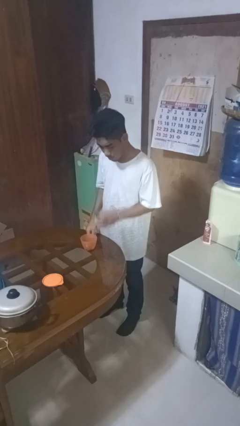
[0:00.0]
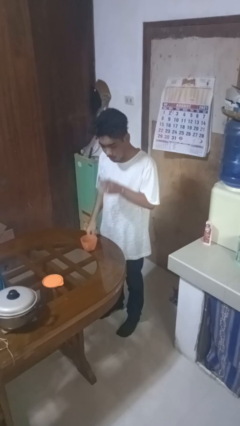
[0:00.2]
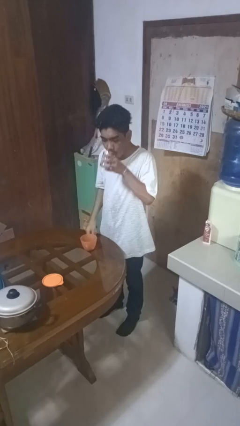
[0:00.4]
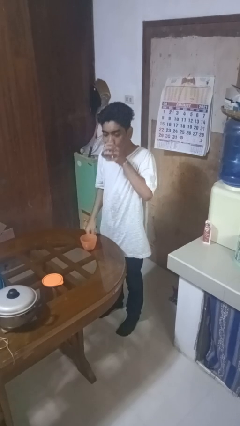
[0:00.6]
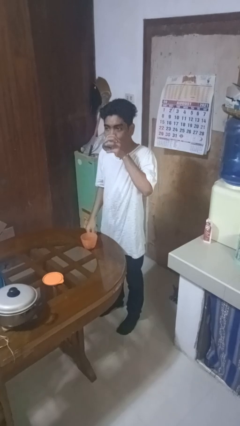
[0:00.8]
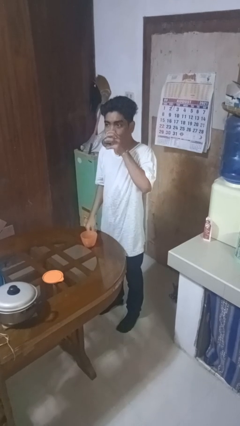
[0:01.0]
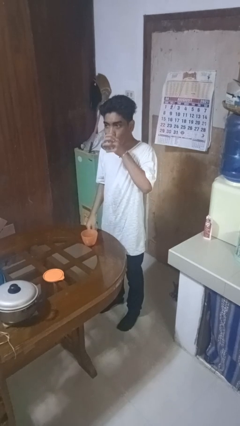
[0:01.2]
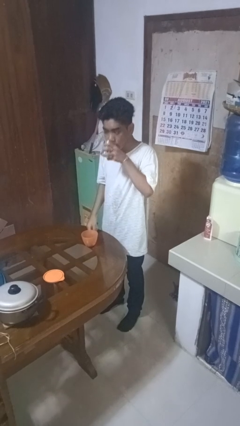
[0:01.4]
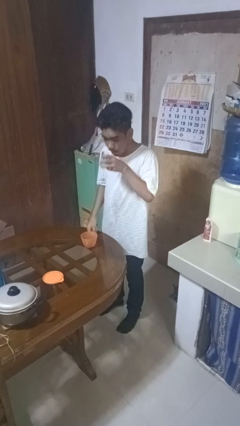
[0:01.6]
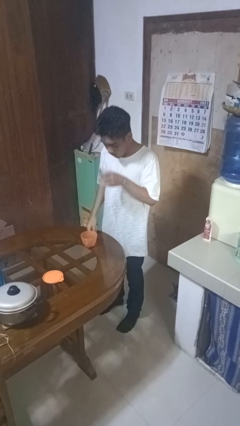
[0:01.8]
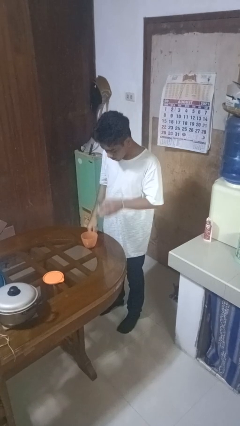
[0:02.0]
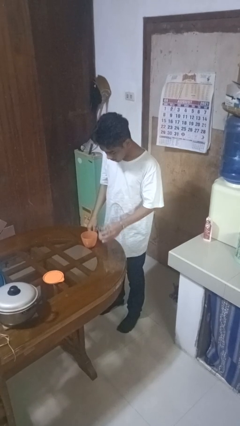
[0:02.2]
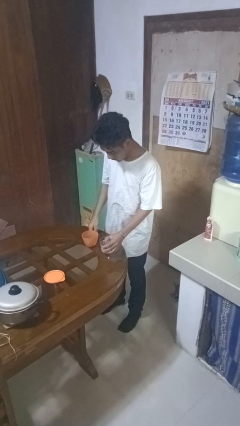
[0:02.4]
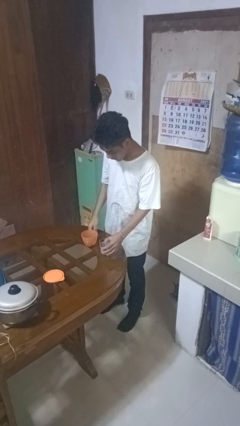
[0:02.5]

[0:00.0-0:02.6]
person drinks from cup

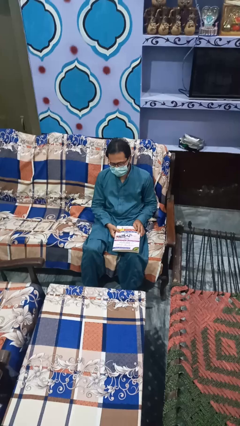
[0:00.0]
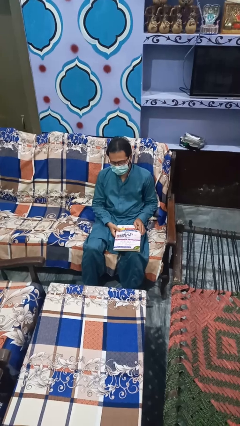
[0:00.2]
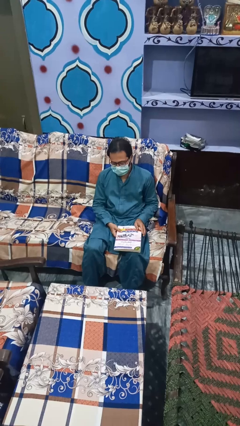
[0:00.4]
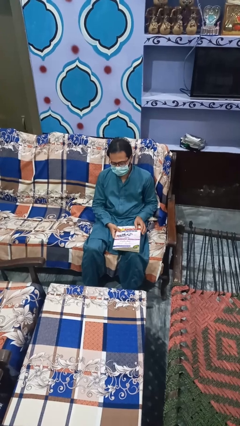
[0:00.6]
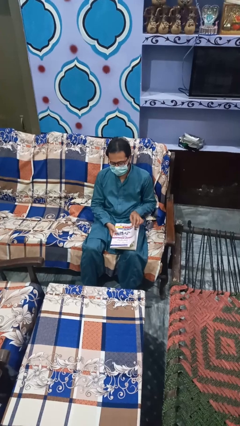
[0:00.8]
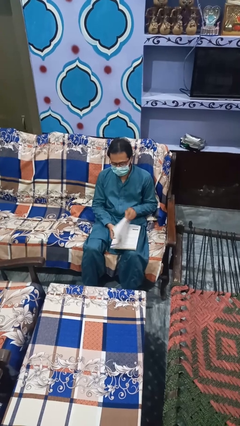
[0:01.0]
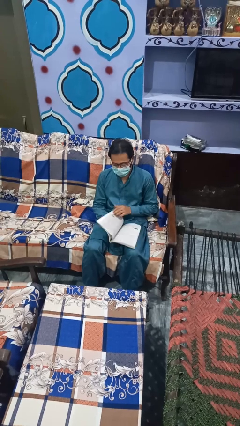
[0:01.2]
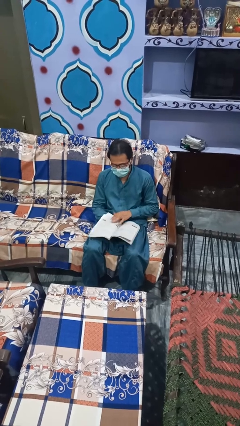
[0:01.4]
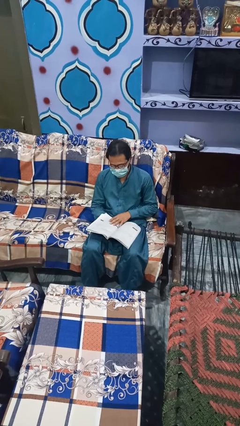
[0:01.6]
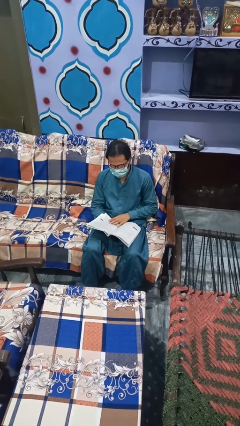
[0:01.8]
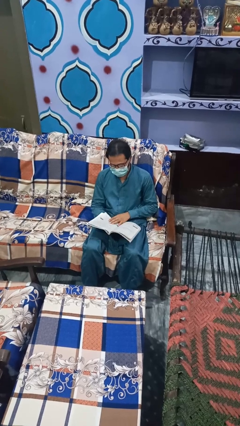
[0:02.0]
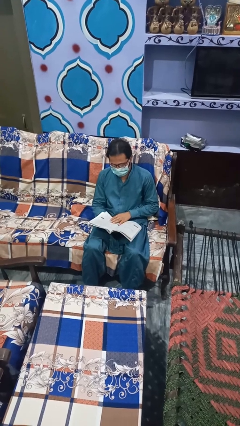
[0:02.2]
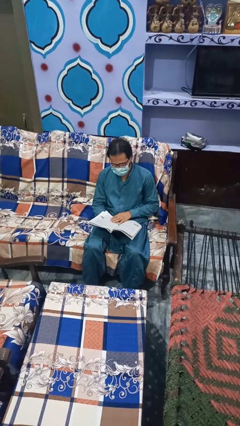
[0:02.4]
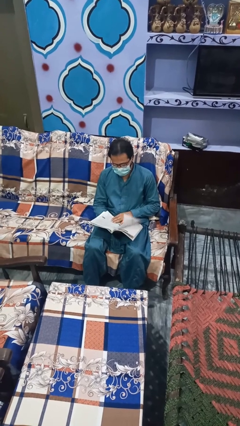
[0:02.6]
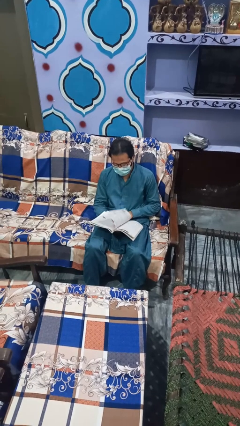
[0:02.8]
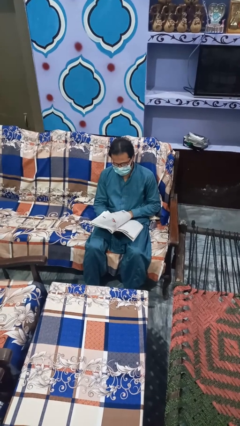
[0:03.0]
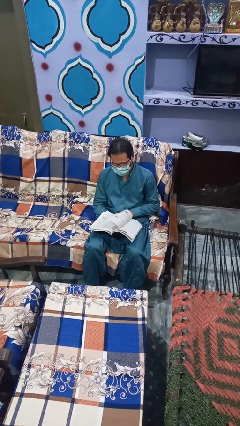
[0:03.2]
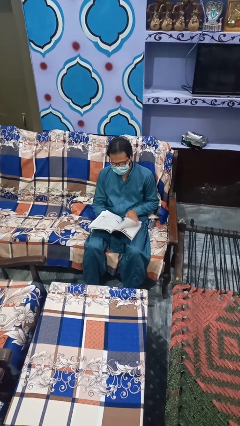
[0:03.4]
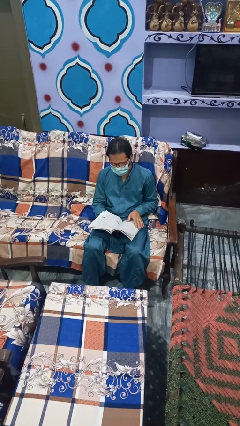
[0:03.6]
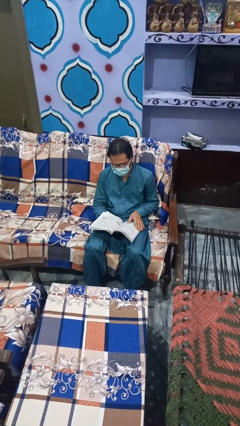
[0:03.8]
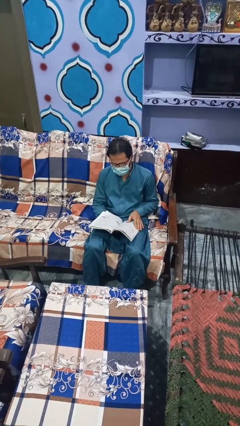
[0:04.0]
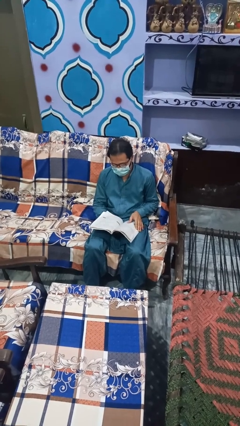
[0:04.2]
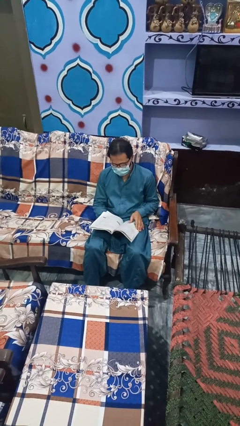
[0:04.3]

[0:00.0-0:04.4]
person reads magazine

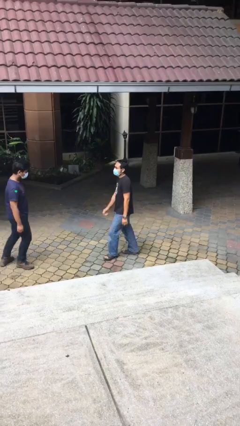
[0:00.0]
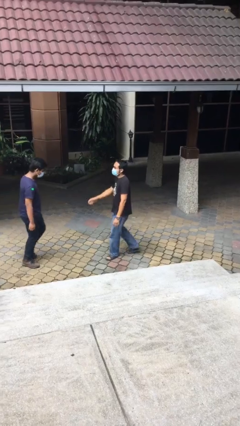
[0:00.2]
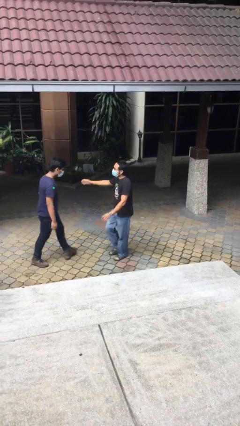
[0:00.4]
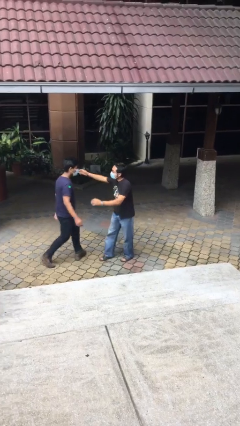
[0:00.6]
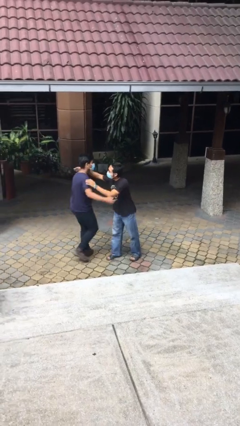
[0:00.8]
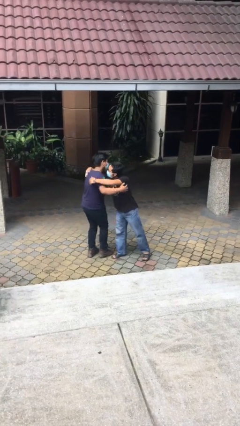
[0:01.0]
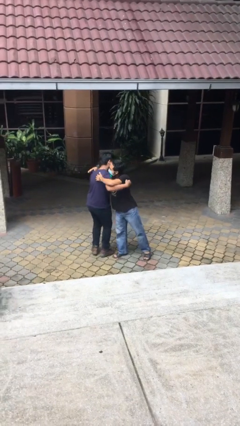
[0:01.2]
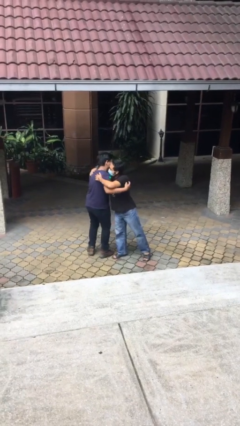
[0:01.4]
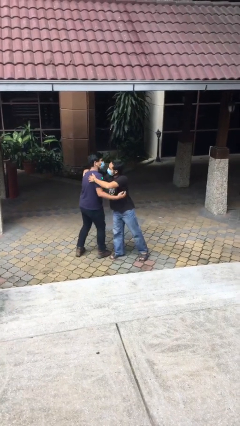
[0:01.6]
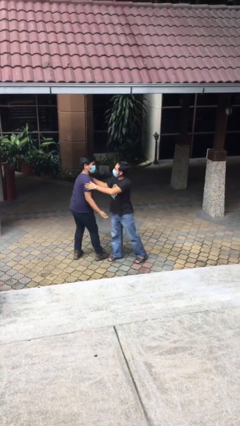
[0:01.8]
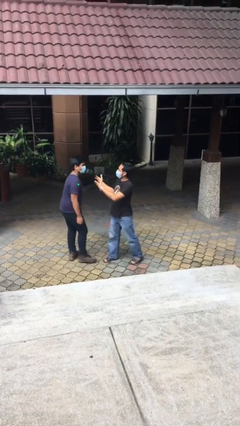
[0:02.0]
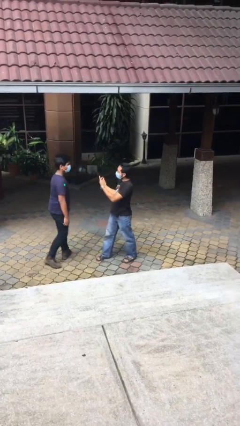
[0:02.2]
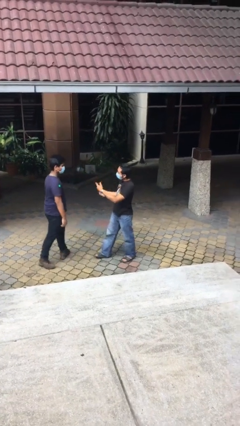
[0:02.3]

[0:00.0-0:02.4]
person embraces person

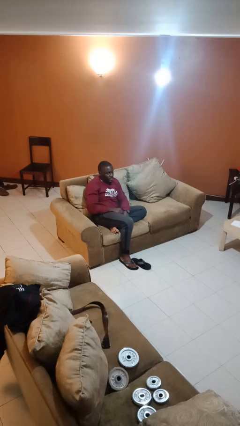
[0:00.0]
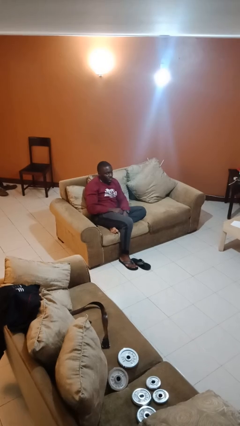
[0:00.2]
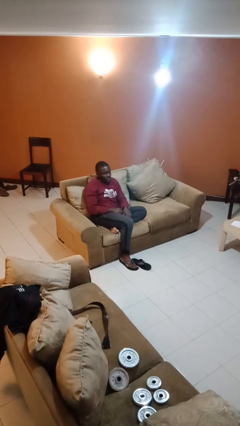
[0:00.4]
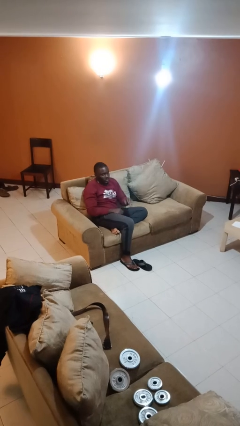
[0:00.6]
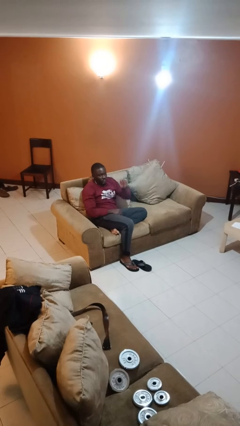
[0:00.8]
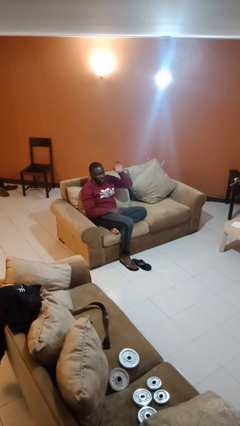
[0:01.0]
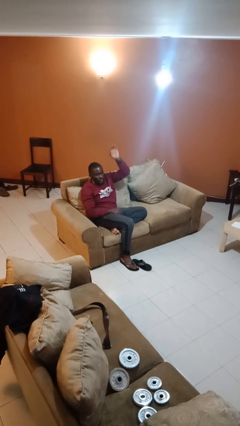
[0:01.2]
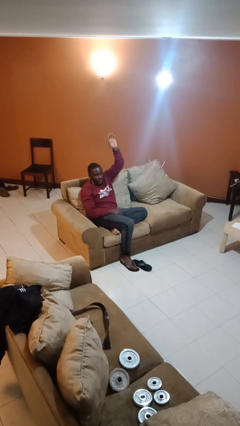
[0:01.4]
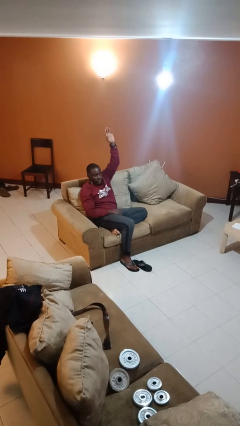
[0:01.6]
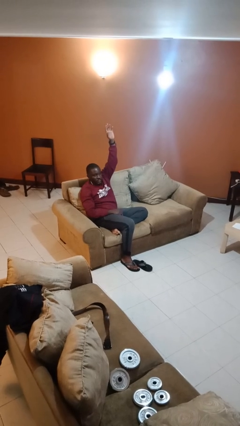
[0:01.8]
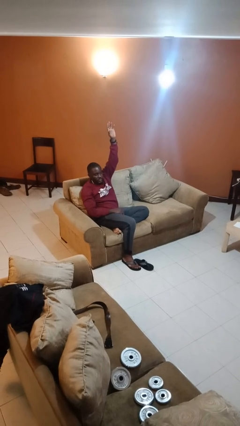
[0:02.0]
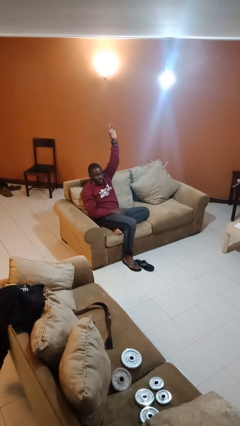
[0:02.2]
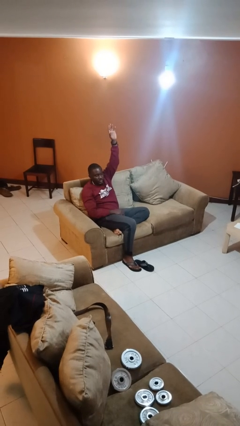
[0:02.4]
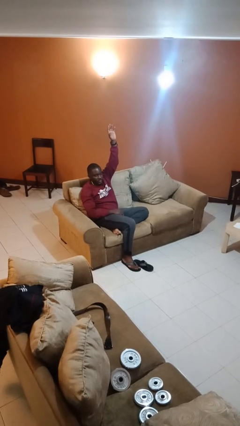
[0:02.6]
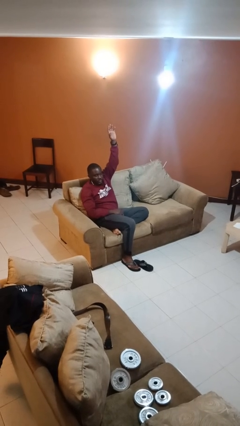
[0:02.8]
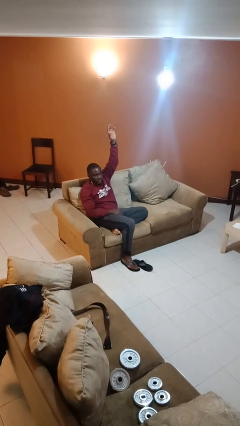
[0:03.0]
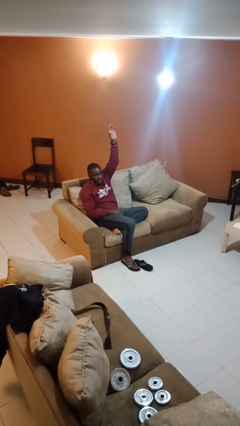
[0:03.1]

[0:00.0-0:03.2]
person gestures raise hand

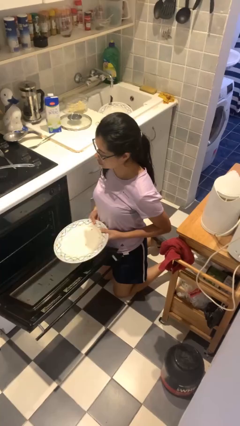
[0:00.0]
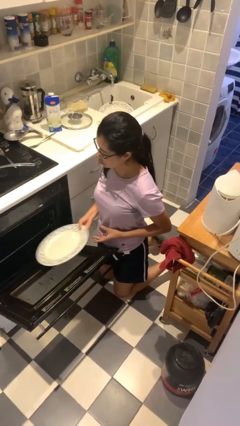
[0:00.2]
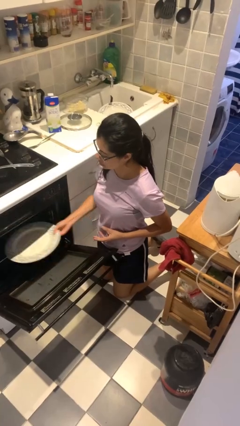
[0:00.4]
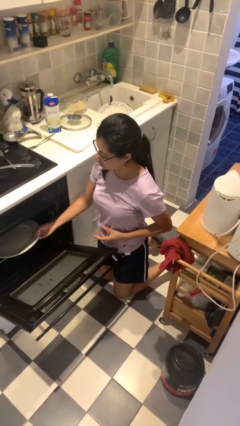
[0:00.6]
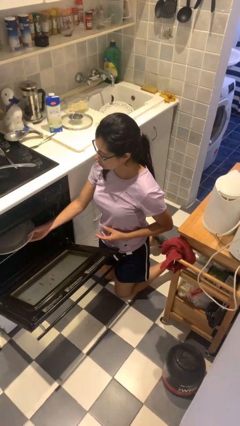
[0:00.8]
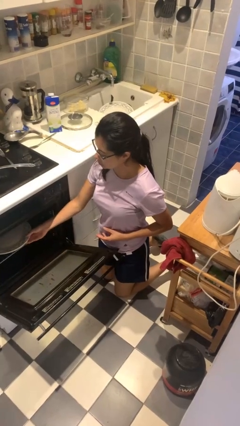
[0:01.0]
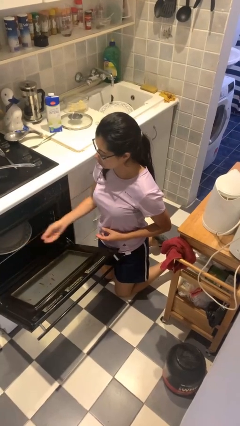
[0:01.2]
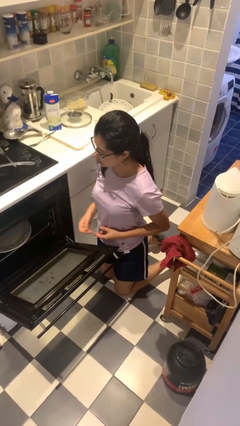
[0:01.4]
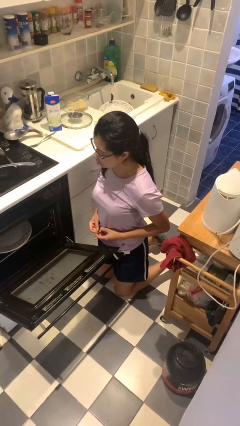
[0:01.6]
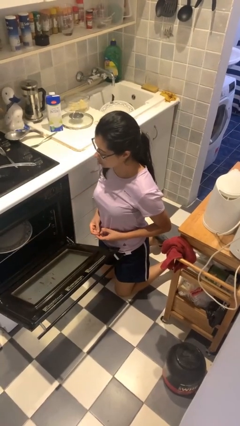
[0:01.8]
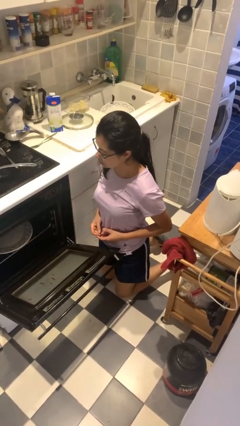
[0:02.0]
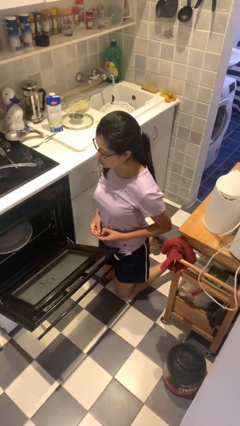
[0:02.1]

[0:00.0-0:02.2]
person loads dishwasher

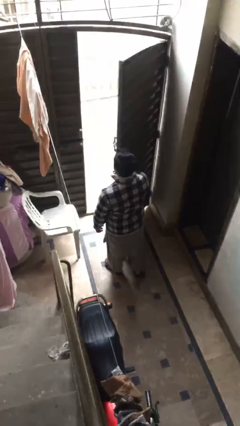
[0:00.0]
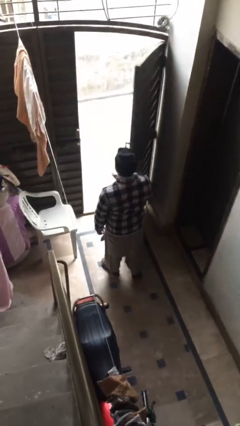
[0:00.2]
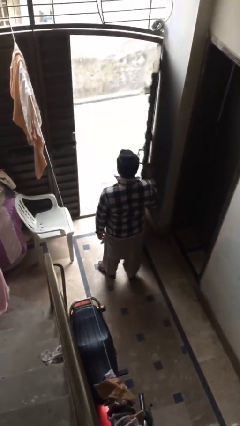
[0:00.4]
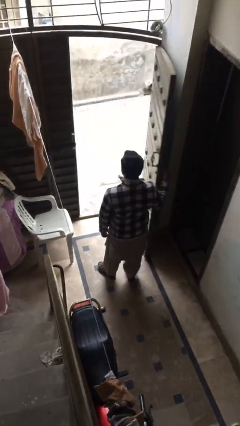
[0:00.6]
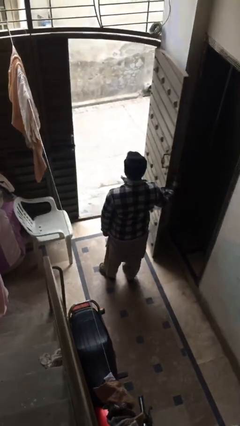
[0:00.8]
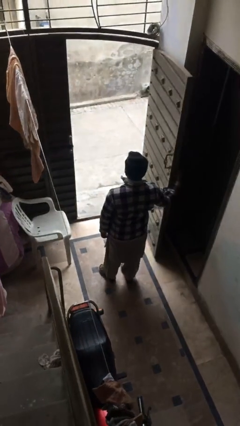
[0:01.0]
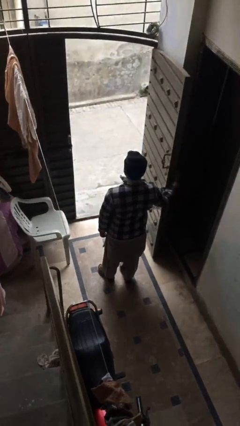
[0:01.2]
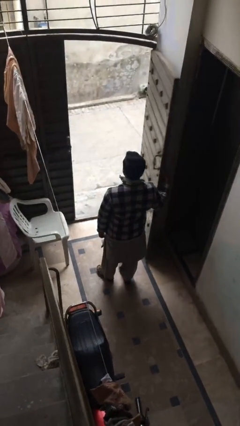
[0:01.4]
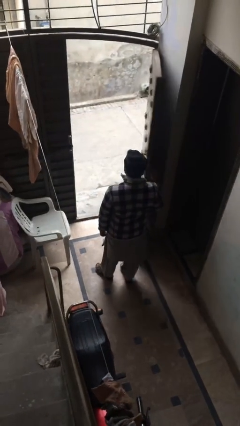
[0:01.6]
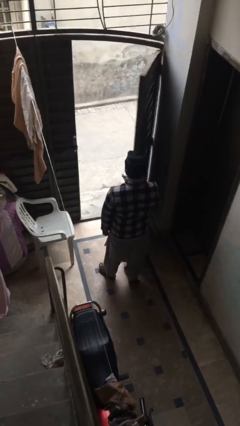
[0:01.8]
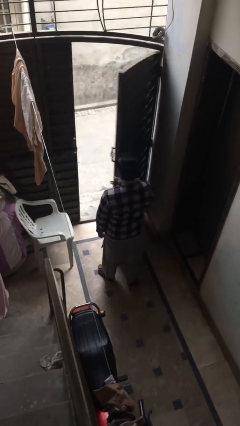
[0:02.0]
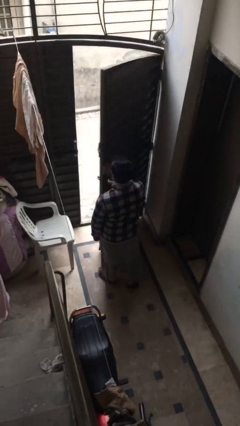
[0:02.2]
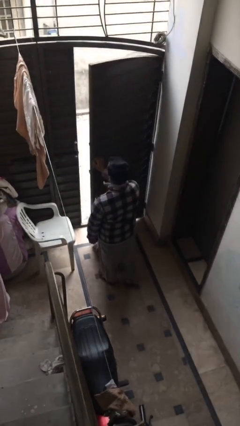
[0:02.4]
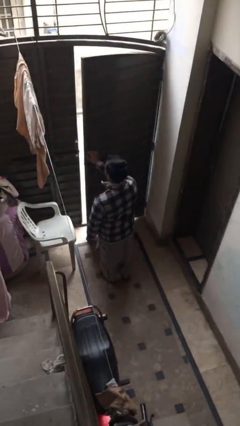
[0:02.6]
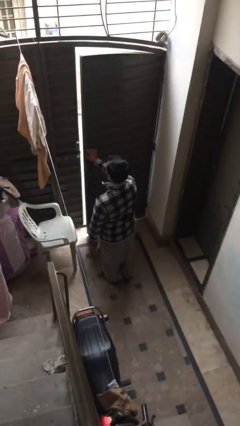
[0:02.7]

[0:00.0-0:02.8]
person closes facility door
